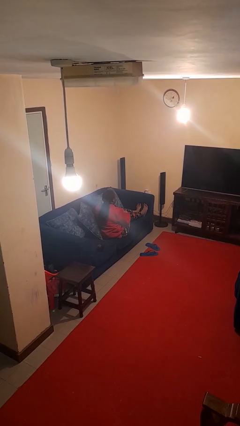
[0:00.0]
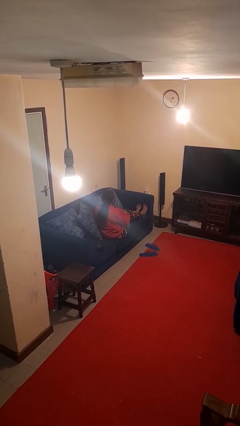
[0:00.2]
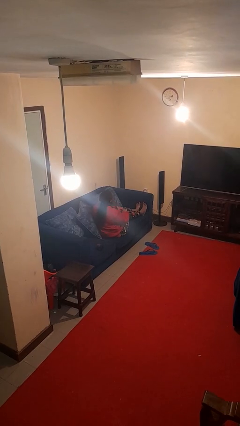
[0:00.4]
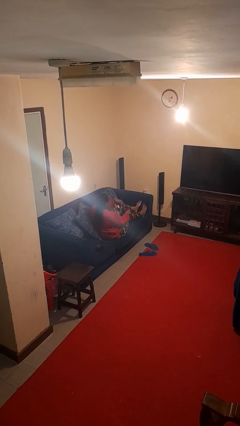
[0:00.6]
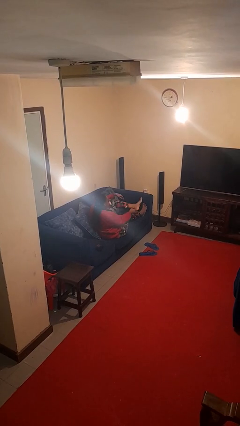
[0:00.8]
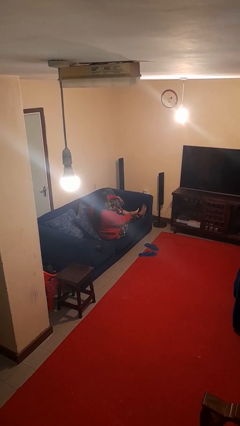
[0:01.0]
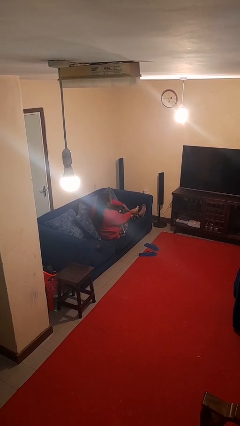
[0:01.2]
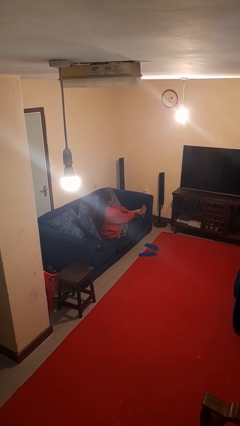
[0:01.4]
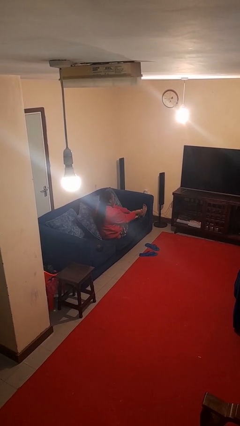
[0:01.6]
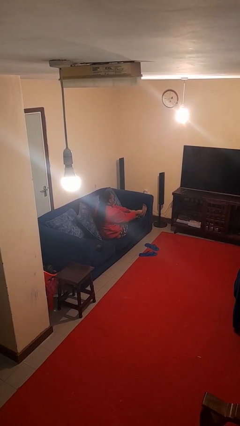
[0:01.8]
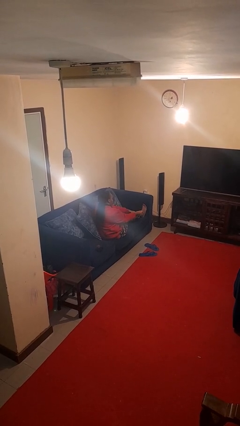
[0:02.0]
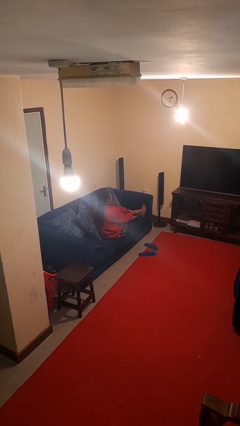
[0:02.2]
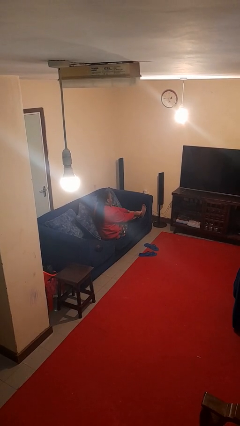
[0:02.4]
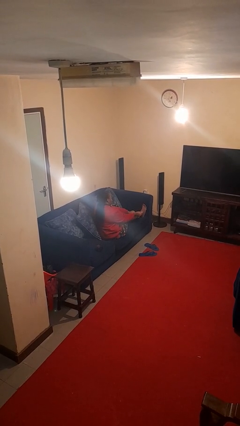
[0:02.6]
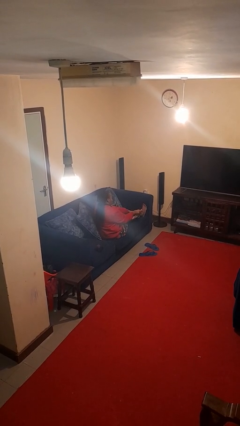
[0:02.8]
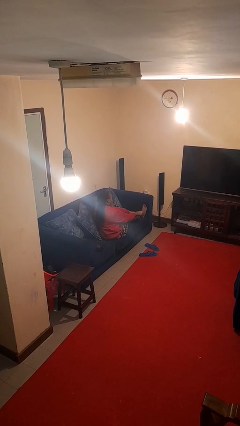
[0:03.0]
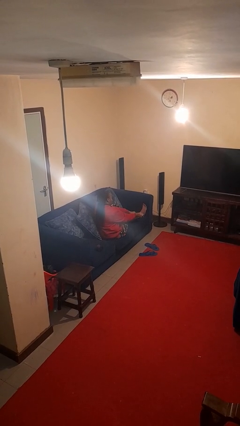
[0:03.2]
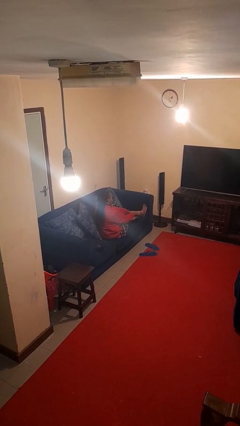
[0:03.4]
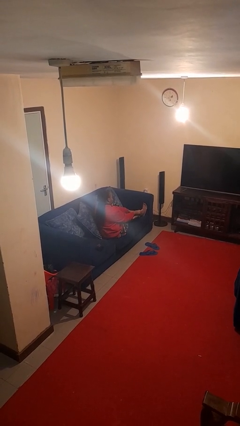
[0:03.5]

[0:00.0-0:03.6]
person rubs foot

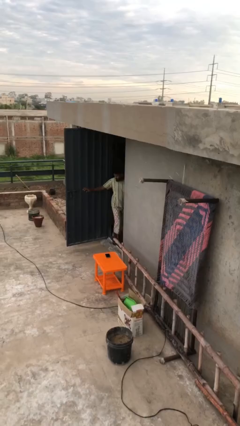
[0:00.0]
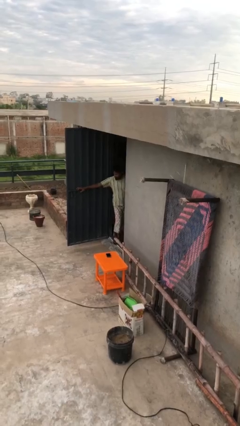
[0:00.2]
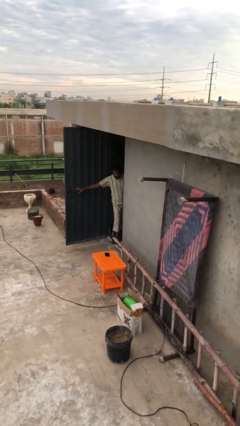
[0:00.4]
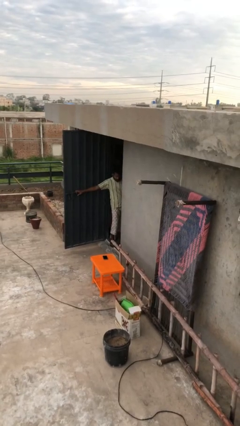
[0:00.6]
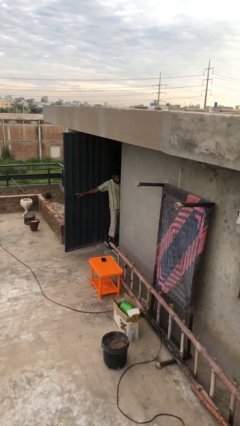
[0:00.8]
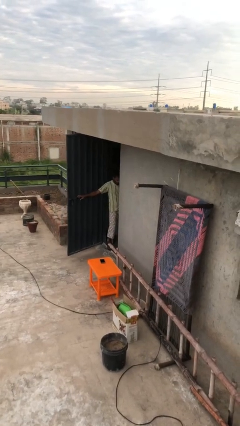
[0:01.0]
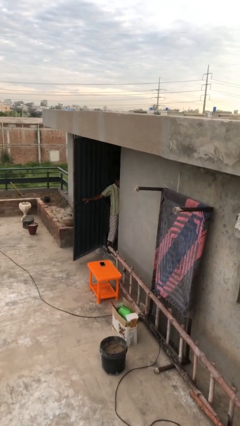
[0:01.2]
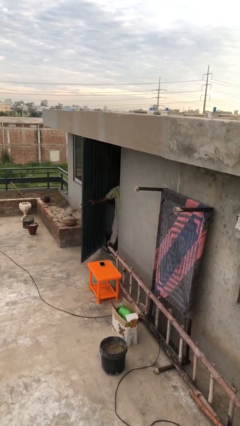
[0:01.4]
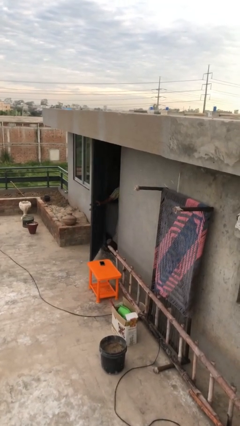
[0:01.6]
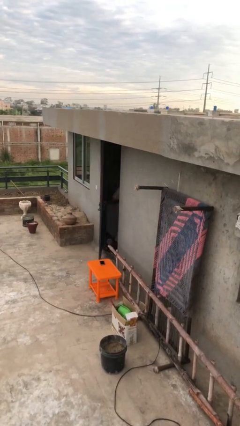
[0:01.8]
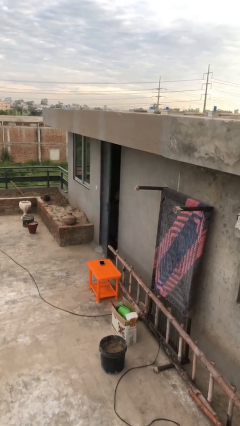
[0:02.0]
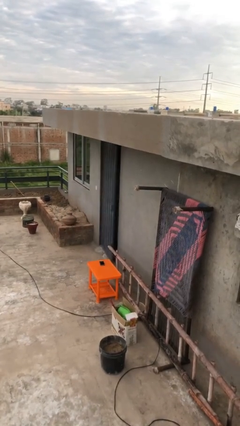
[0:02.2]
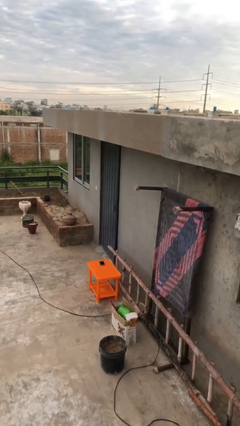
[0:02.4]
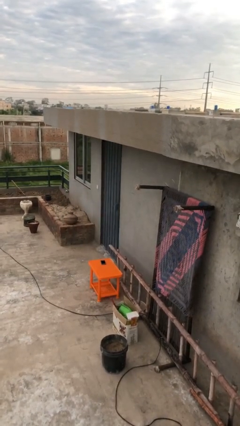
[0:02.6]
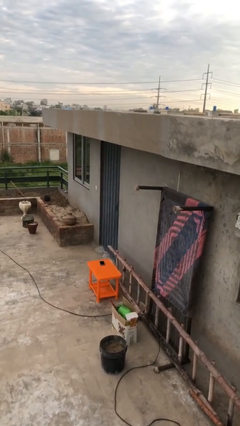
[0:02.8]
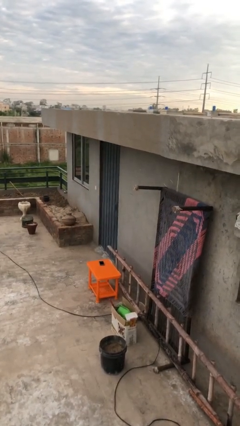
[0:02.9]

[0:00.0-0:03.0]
person closes facility door

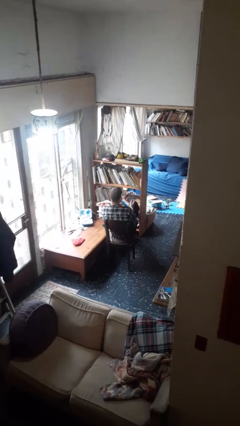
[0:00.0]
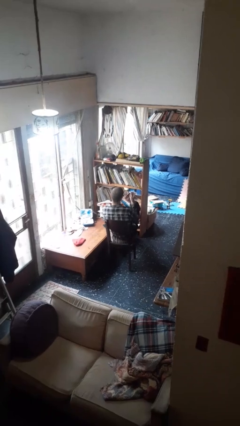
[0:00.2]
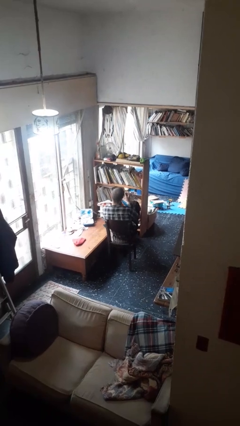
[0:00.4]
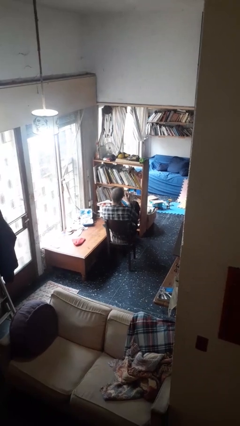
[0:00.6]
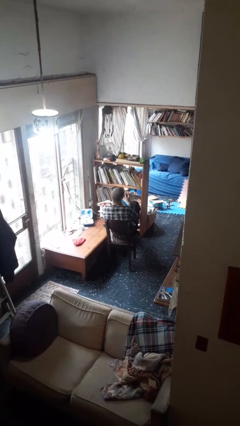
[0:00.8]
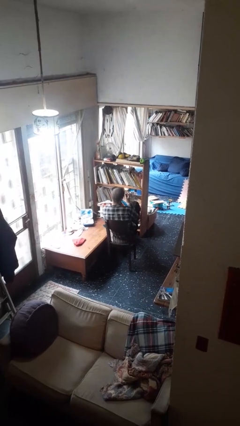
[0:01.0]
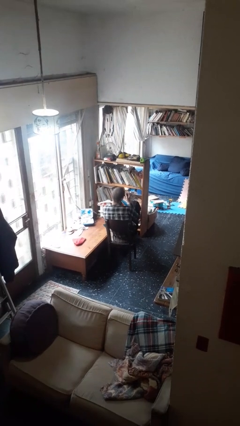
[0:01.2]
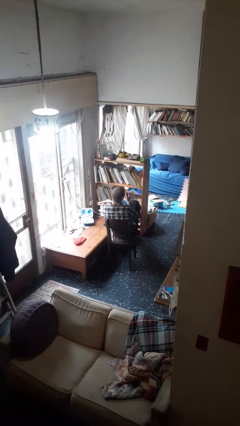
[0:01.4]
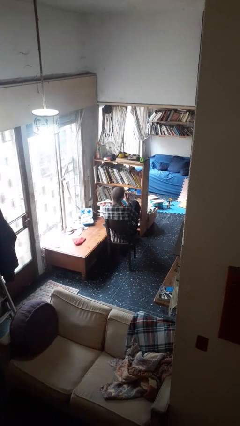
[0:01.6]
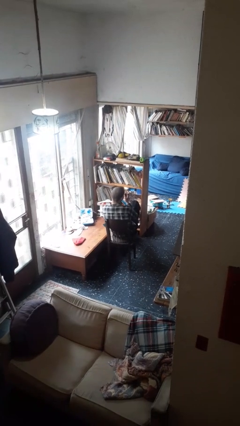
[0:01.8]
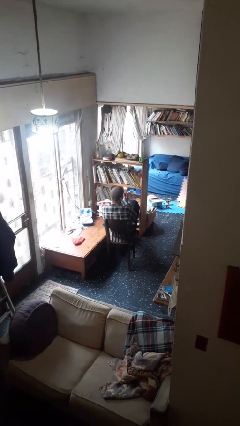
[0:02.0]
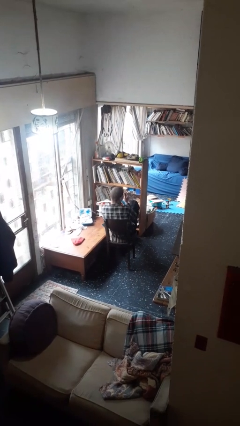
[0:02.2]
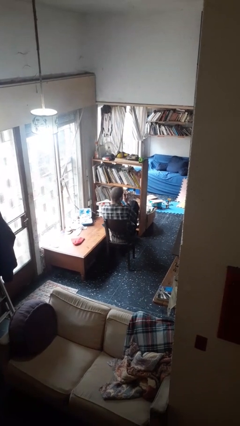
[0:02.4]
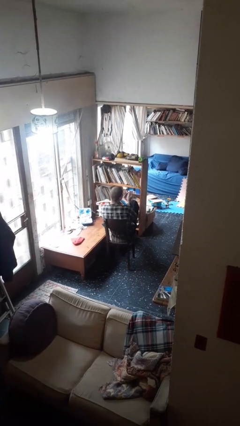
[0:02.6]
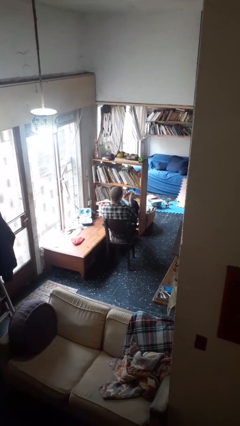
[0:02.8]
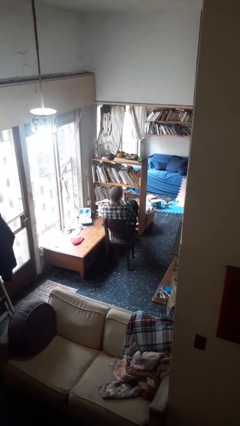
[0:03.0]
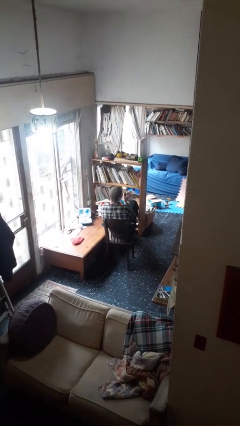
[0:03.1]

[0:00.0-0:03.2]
person files fingernails

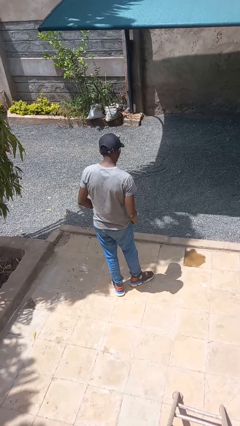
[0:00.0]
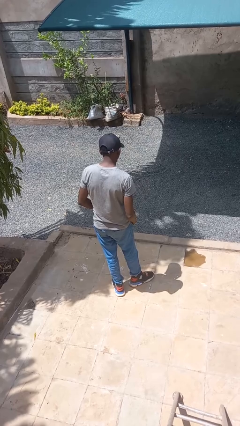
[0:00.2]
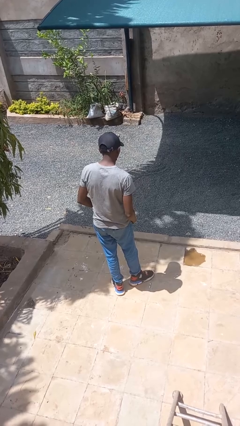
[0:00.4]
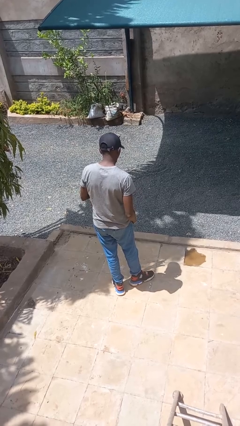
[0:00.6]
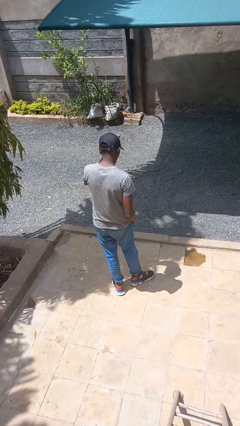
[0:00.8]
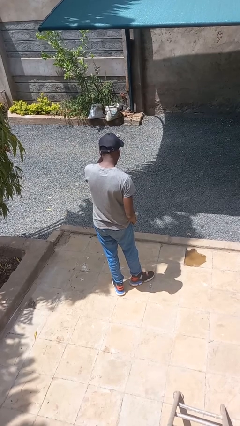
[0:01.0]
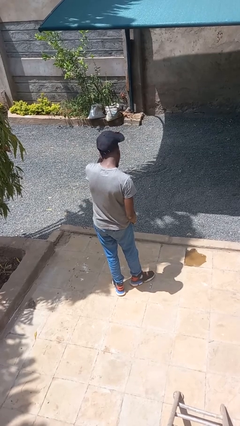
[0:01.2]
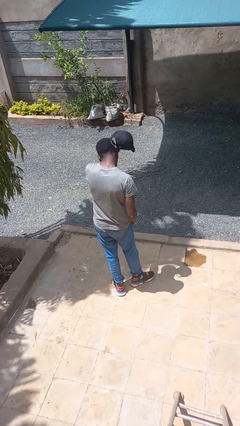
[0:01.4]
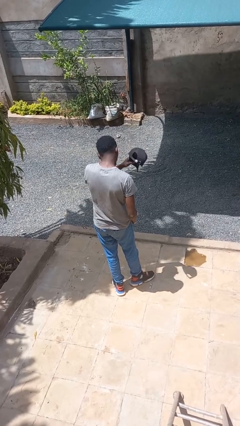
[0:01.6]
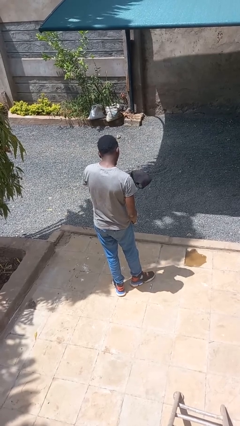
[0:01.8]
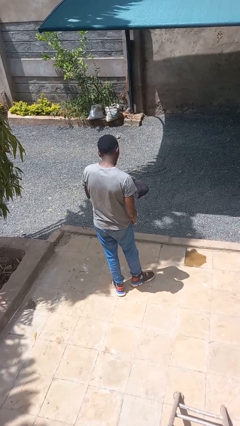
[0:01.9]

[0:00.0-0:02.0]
person takes off hat

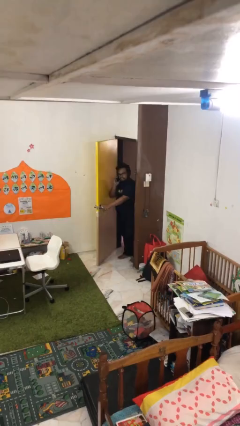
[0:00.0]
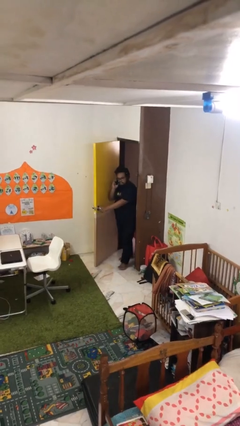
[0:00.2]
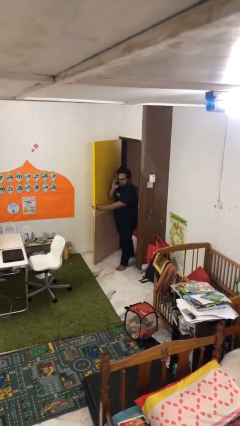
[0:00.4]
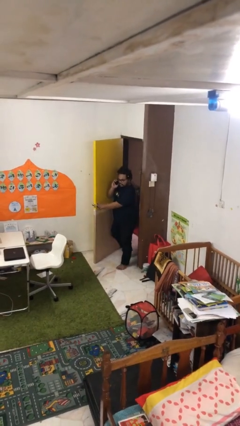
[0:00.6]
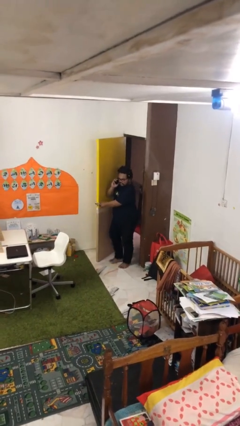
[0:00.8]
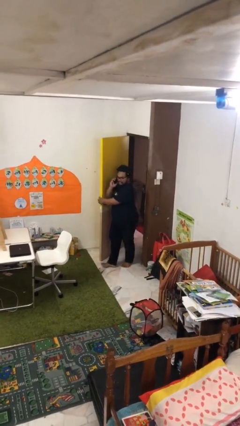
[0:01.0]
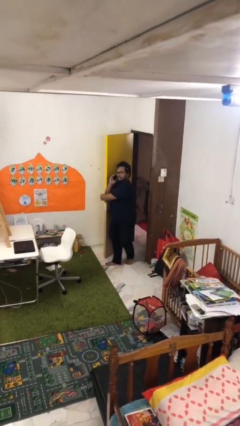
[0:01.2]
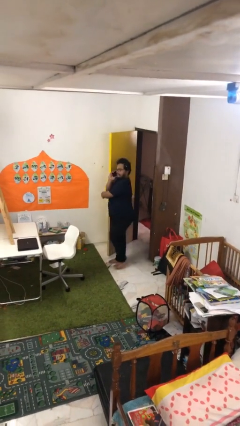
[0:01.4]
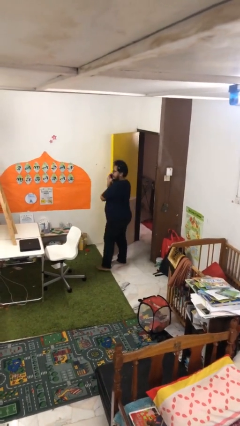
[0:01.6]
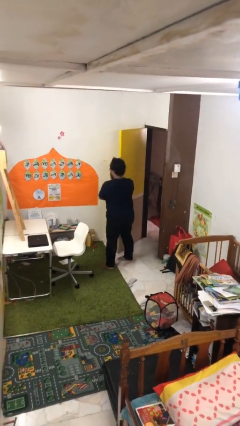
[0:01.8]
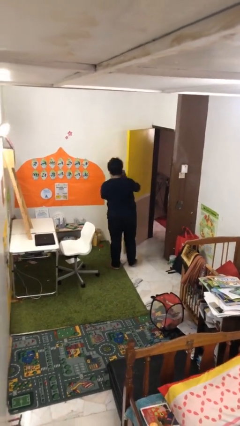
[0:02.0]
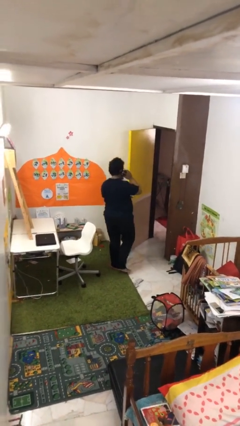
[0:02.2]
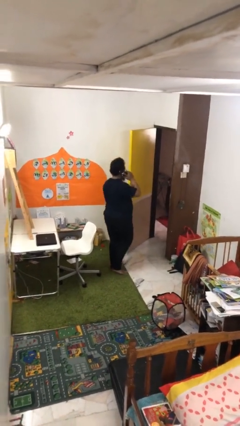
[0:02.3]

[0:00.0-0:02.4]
person enters scene through structure

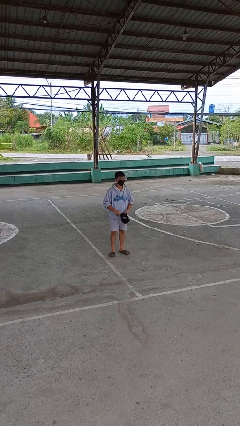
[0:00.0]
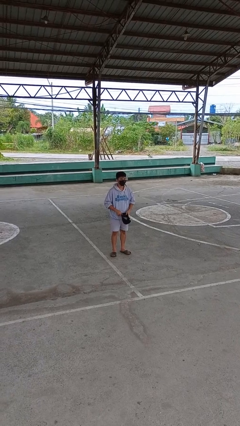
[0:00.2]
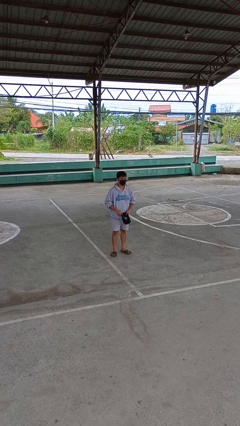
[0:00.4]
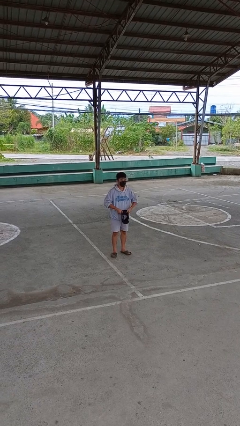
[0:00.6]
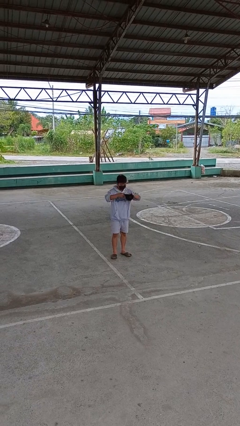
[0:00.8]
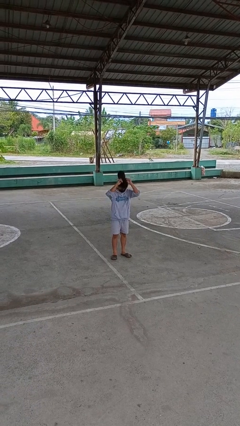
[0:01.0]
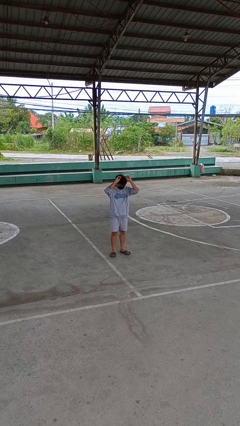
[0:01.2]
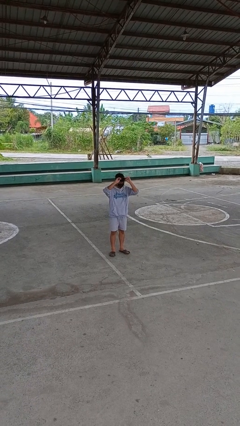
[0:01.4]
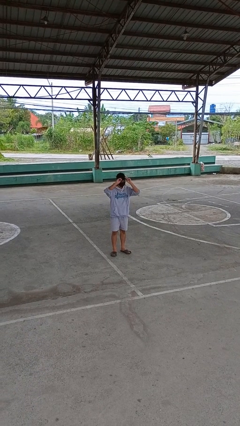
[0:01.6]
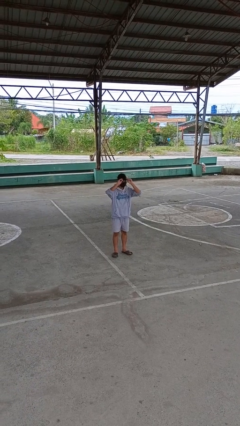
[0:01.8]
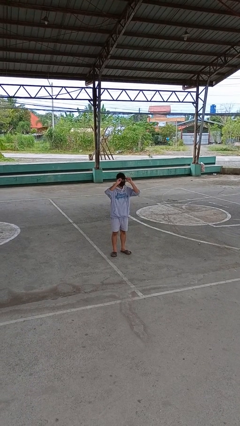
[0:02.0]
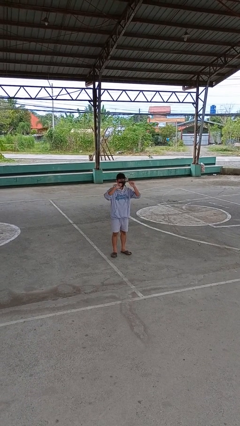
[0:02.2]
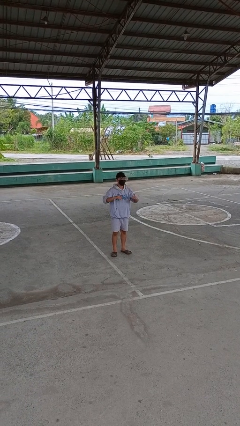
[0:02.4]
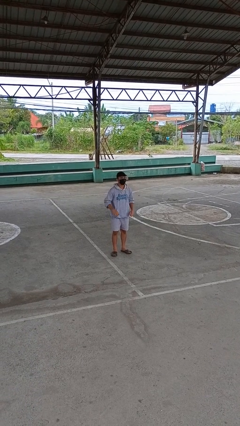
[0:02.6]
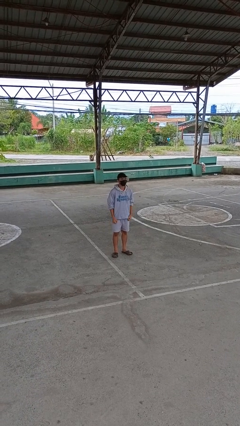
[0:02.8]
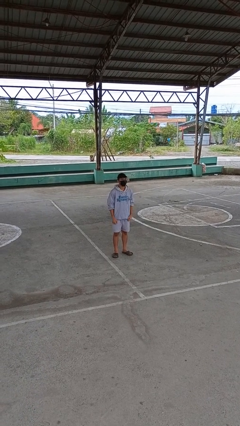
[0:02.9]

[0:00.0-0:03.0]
person puts on hat
